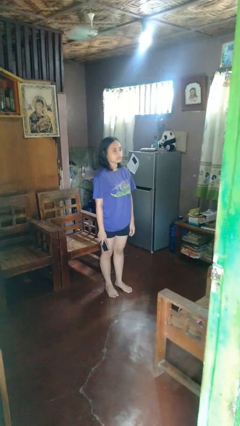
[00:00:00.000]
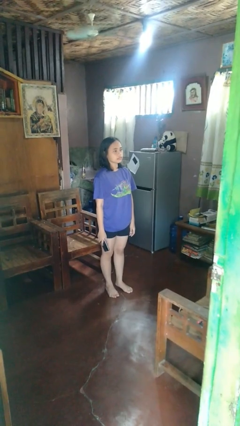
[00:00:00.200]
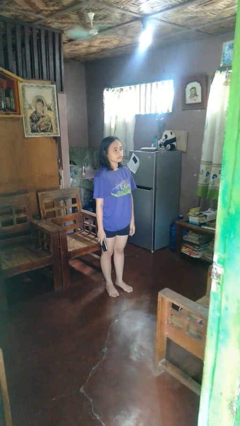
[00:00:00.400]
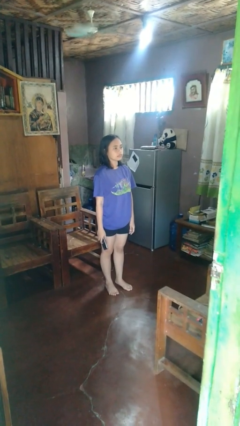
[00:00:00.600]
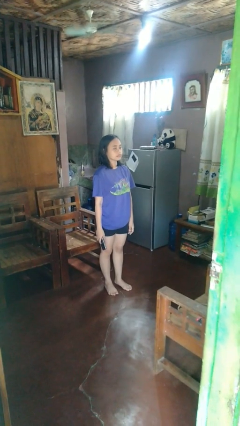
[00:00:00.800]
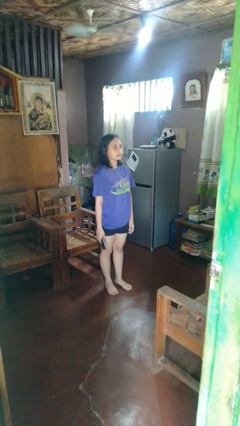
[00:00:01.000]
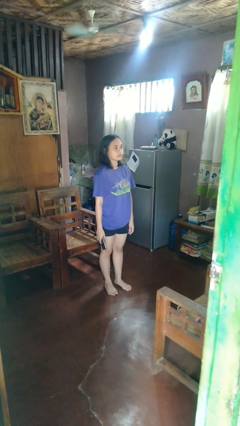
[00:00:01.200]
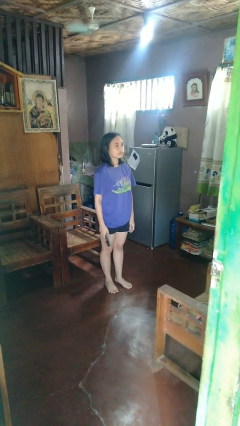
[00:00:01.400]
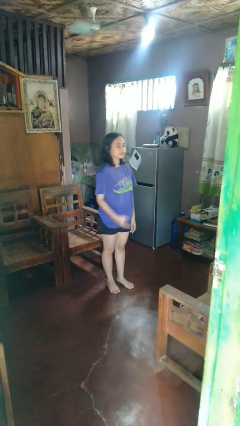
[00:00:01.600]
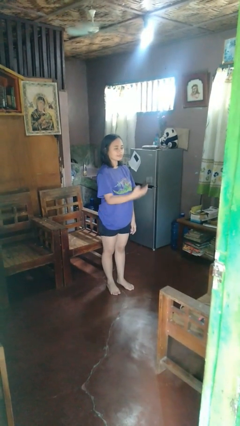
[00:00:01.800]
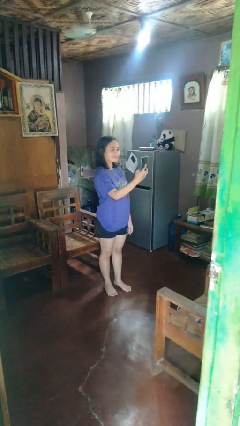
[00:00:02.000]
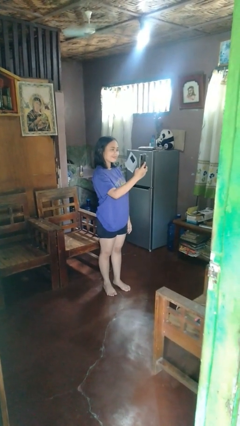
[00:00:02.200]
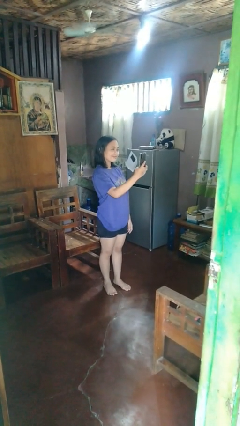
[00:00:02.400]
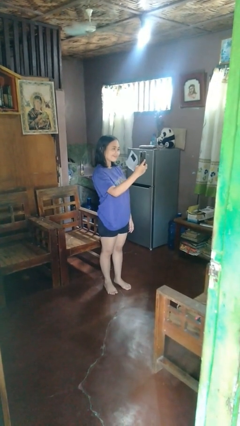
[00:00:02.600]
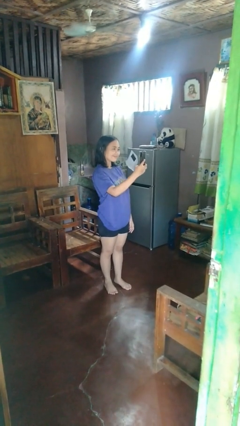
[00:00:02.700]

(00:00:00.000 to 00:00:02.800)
person takes selfie

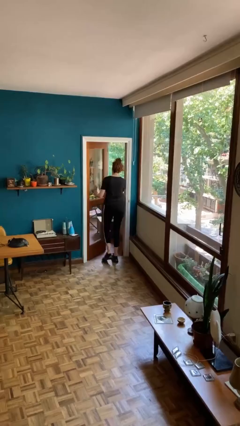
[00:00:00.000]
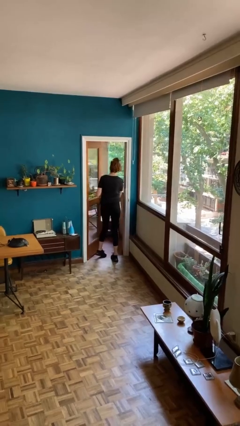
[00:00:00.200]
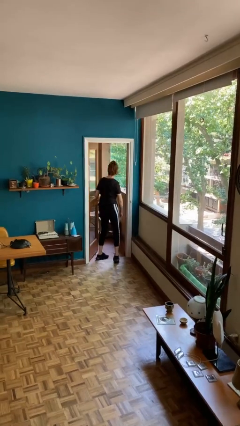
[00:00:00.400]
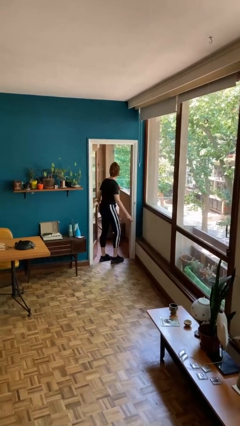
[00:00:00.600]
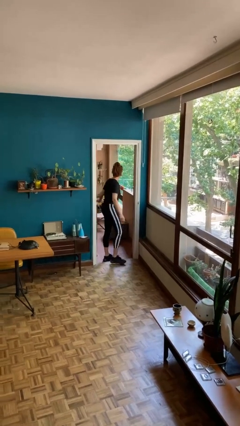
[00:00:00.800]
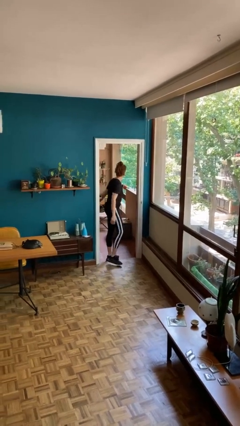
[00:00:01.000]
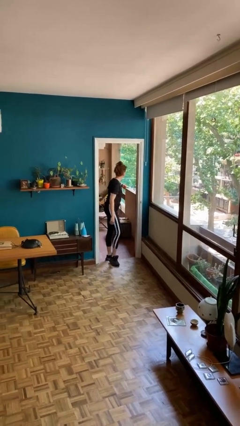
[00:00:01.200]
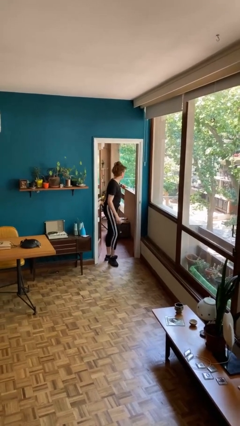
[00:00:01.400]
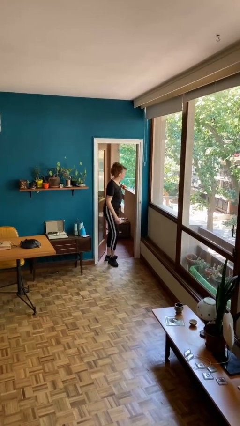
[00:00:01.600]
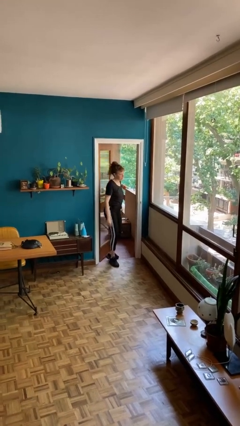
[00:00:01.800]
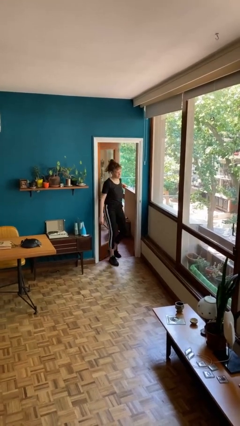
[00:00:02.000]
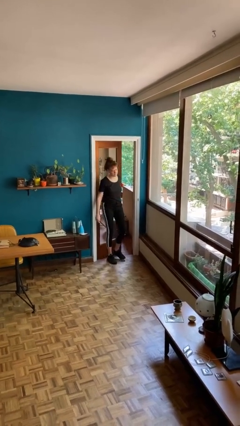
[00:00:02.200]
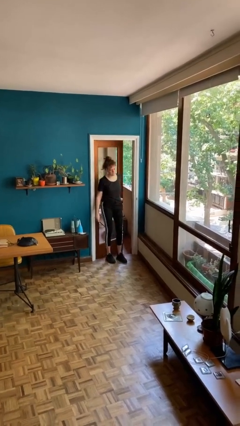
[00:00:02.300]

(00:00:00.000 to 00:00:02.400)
person opens facility door

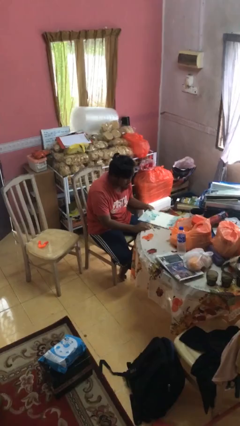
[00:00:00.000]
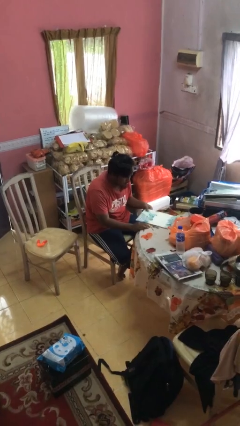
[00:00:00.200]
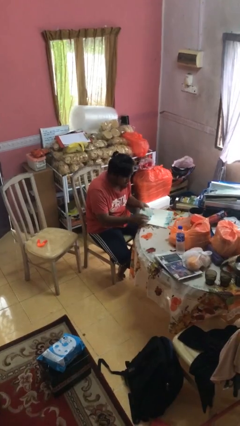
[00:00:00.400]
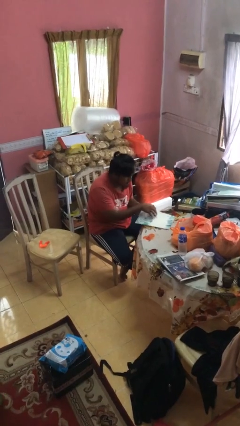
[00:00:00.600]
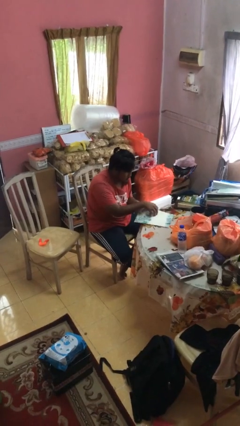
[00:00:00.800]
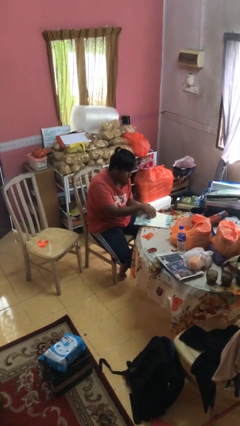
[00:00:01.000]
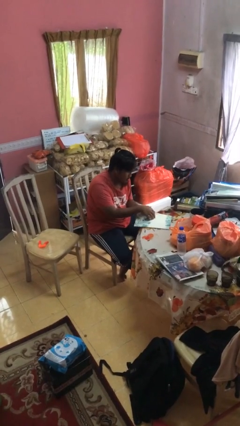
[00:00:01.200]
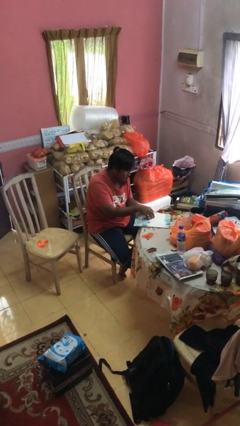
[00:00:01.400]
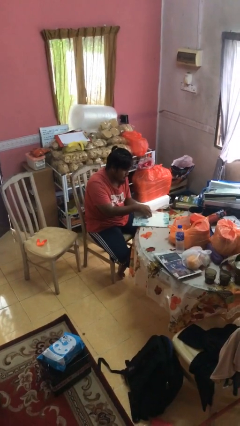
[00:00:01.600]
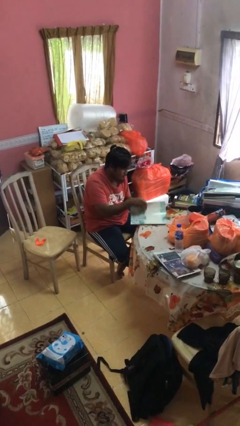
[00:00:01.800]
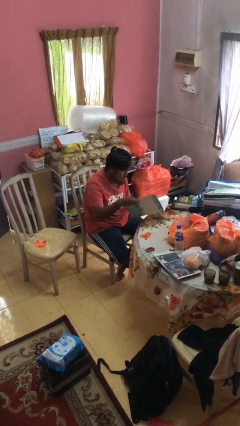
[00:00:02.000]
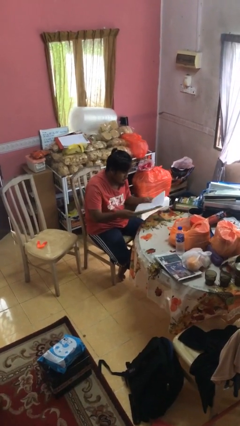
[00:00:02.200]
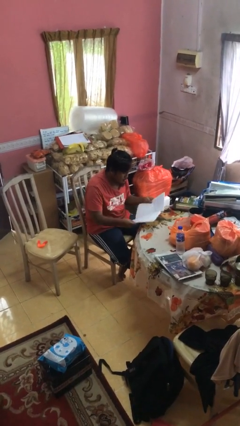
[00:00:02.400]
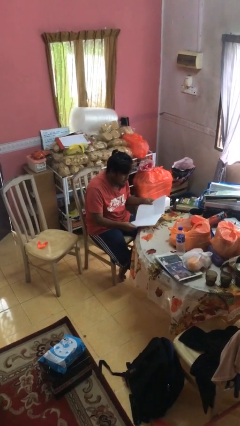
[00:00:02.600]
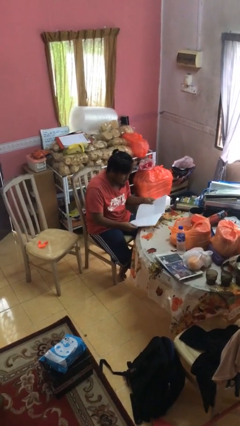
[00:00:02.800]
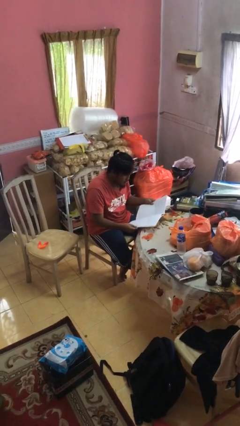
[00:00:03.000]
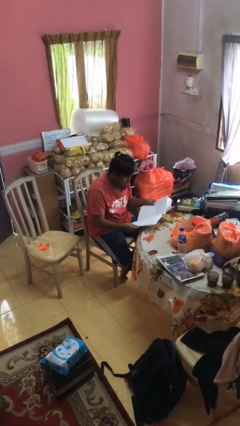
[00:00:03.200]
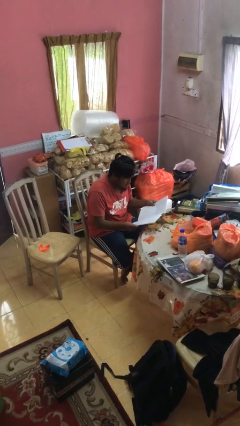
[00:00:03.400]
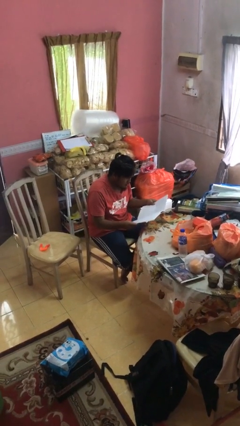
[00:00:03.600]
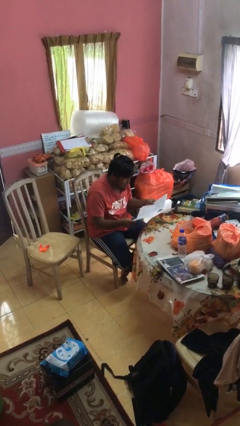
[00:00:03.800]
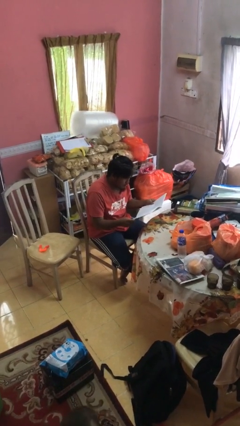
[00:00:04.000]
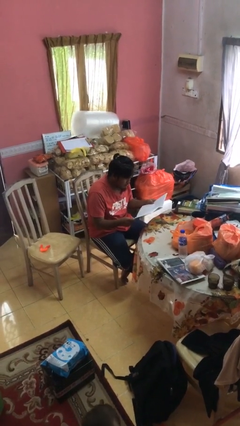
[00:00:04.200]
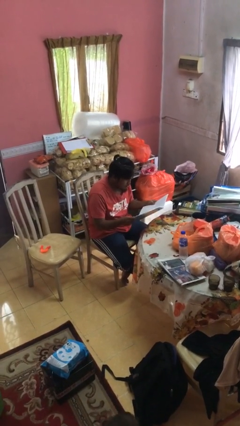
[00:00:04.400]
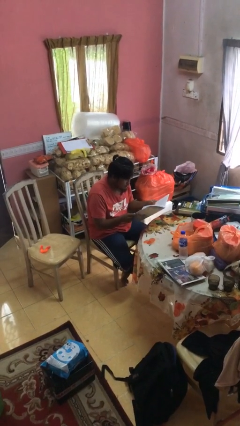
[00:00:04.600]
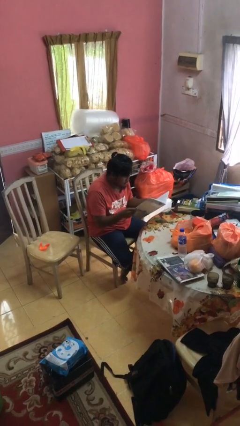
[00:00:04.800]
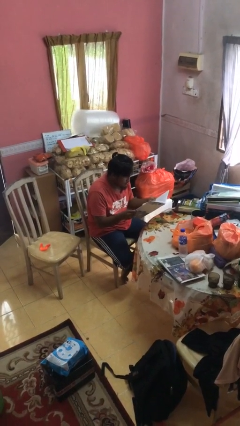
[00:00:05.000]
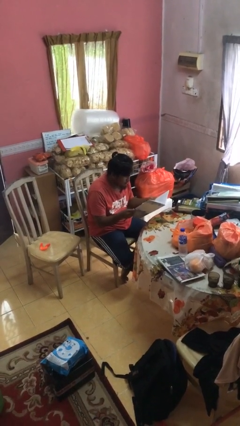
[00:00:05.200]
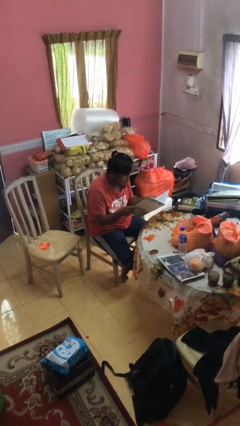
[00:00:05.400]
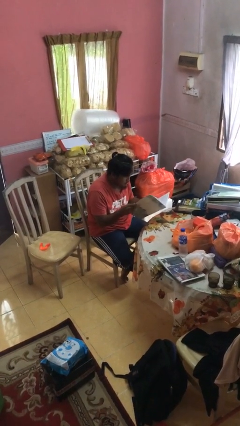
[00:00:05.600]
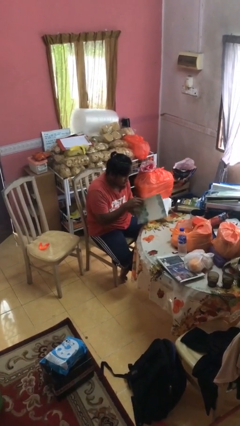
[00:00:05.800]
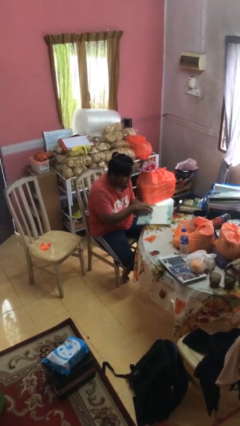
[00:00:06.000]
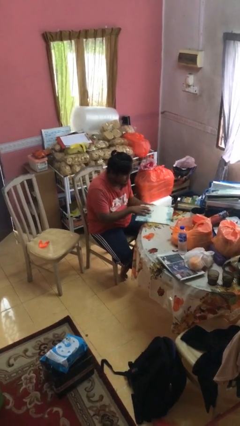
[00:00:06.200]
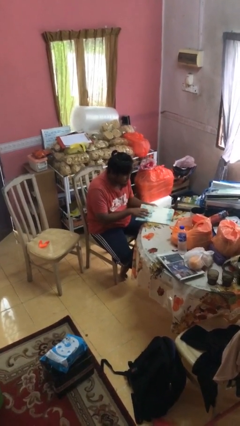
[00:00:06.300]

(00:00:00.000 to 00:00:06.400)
person reads magazine

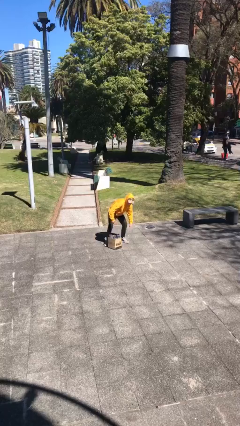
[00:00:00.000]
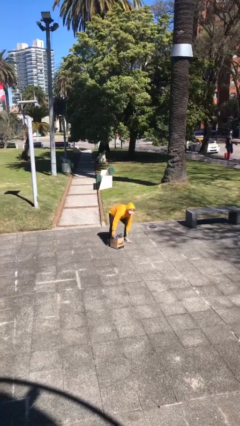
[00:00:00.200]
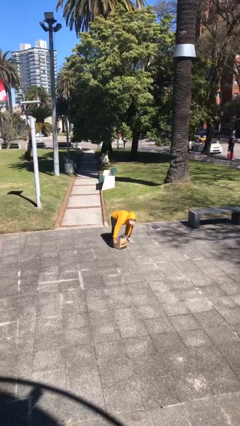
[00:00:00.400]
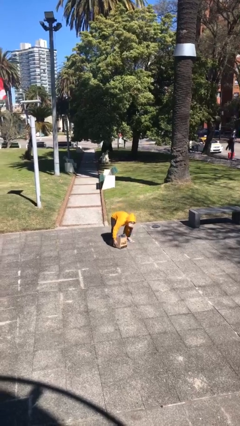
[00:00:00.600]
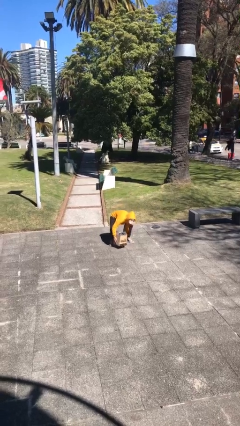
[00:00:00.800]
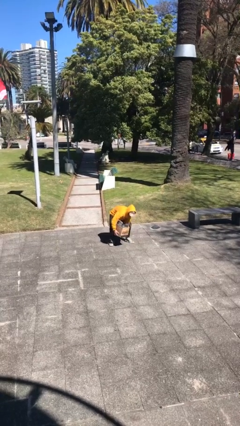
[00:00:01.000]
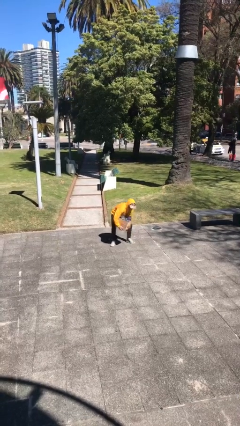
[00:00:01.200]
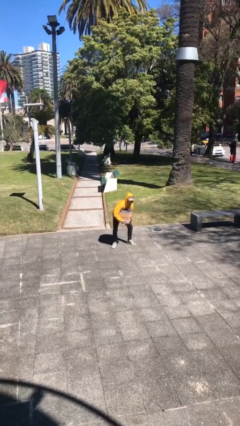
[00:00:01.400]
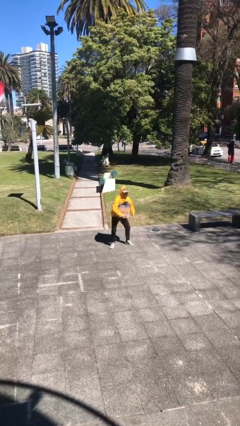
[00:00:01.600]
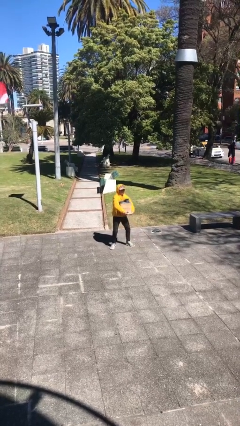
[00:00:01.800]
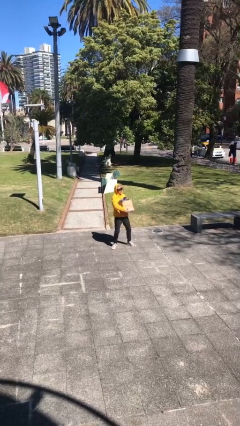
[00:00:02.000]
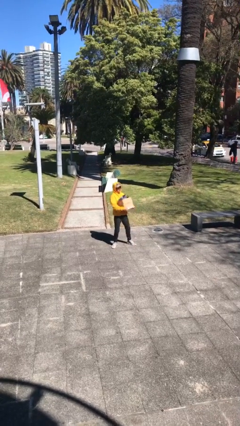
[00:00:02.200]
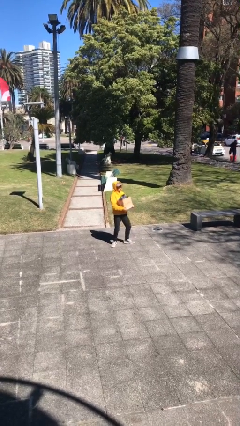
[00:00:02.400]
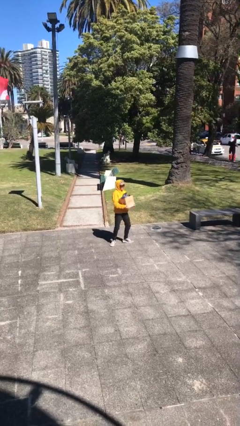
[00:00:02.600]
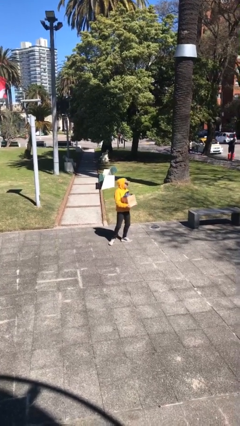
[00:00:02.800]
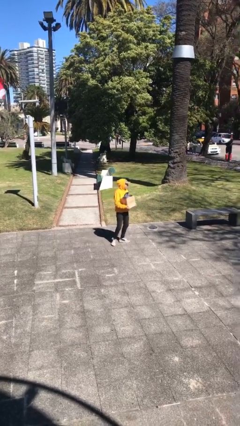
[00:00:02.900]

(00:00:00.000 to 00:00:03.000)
person picks up object from floor

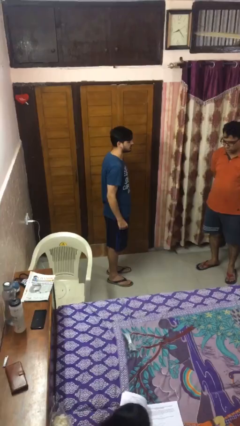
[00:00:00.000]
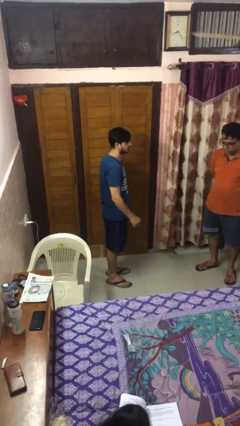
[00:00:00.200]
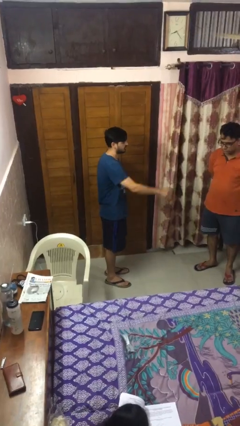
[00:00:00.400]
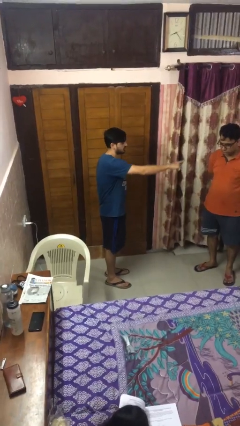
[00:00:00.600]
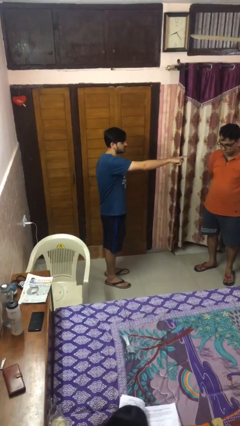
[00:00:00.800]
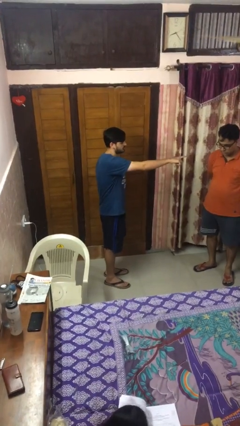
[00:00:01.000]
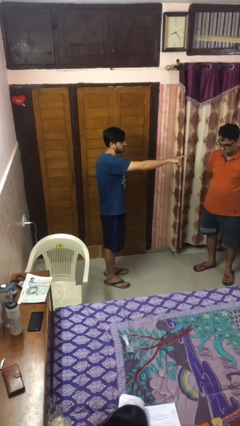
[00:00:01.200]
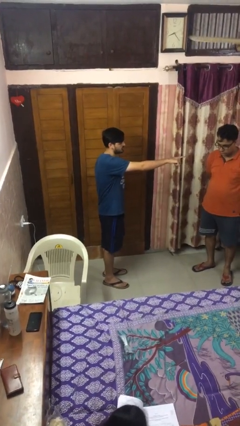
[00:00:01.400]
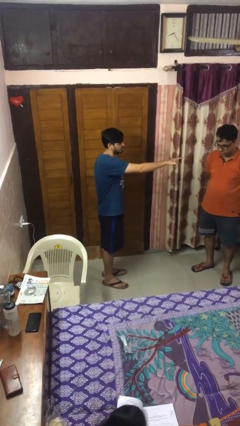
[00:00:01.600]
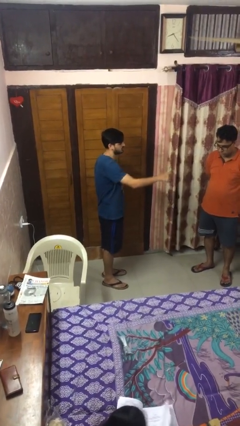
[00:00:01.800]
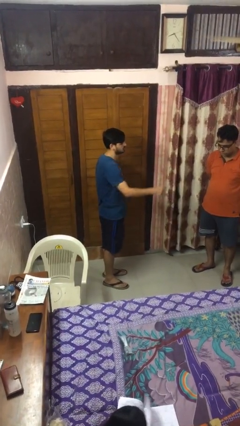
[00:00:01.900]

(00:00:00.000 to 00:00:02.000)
person points at person

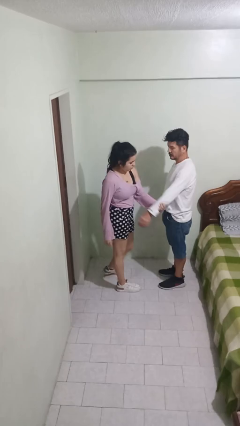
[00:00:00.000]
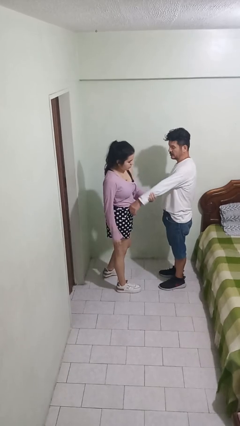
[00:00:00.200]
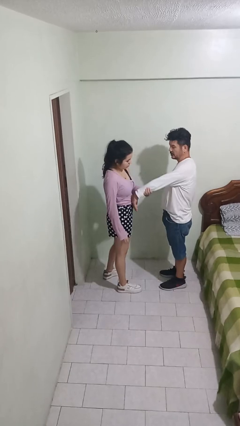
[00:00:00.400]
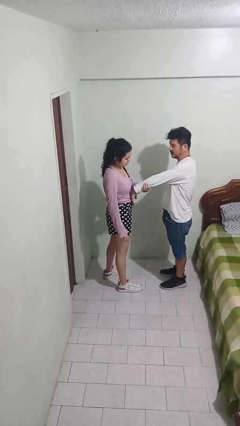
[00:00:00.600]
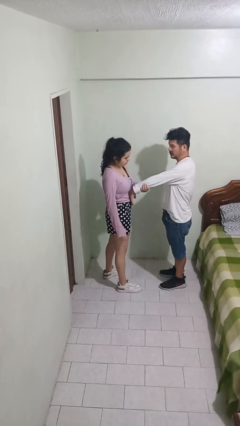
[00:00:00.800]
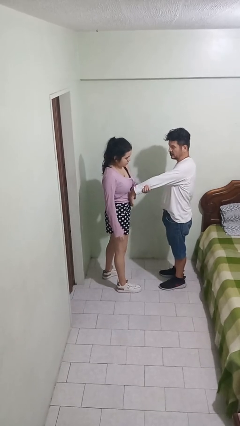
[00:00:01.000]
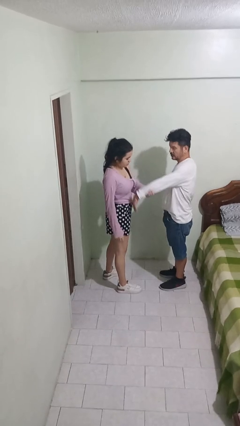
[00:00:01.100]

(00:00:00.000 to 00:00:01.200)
person grabs person by forearm
